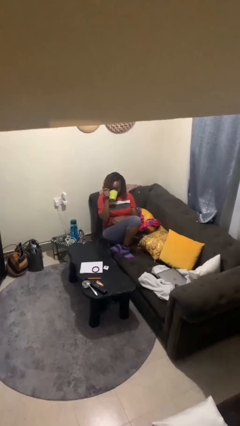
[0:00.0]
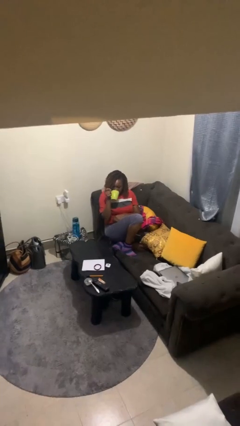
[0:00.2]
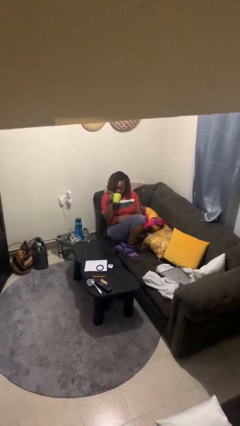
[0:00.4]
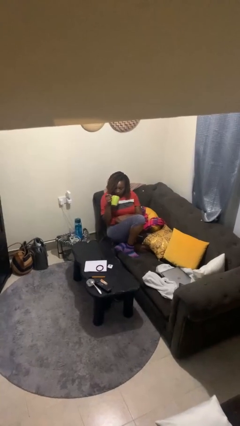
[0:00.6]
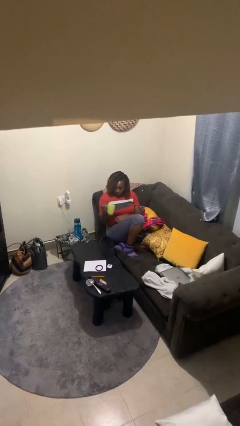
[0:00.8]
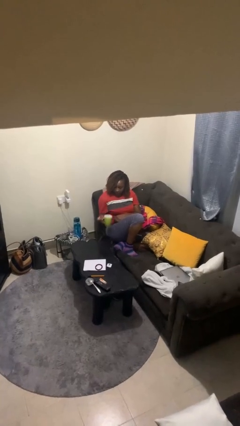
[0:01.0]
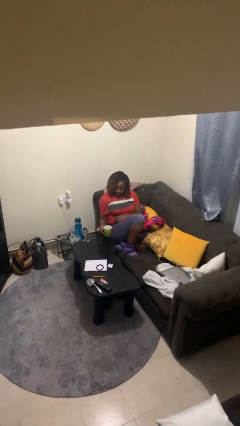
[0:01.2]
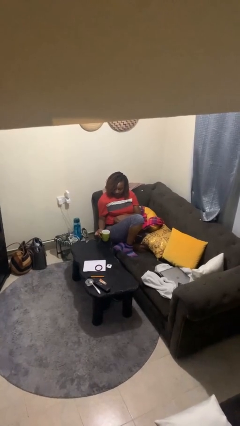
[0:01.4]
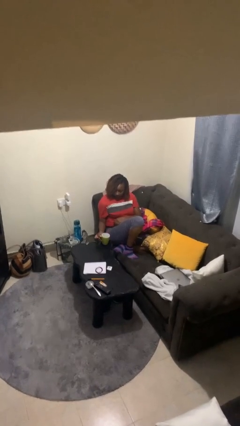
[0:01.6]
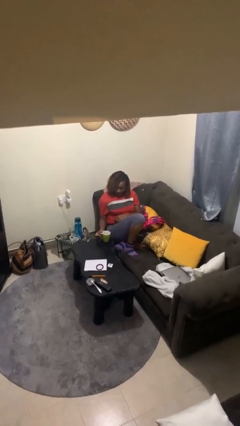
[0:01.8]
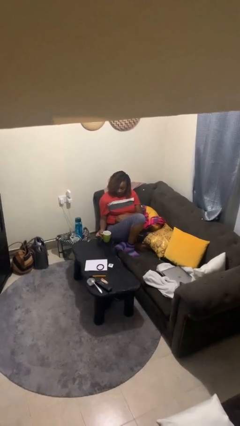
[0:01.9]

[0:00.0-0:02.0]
person puts down object on table

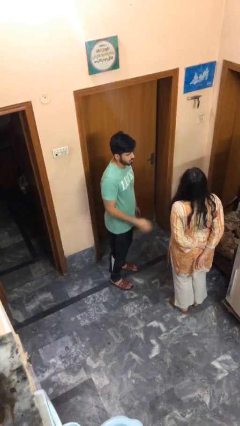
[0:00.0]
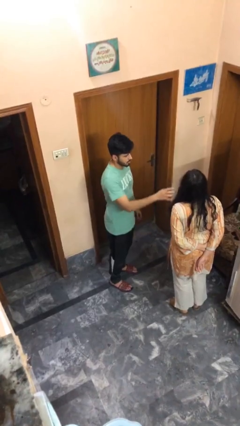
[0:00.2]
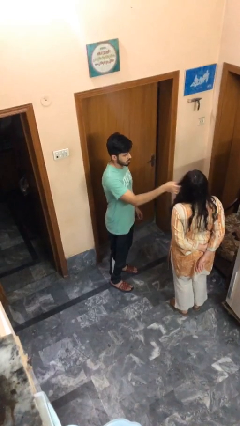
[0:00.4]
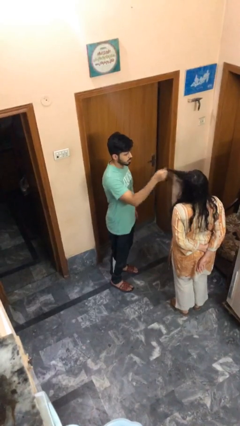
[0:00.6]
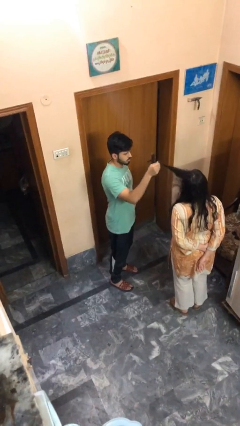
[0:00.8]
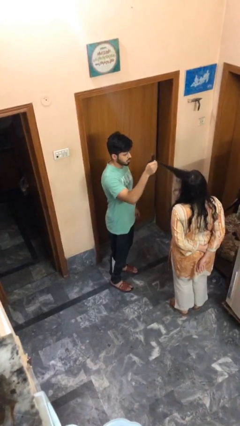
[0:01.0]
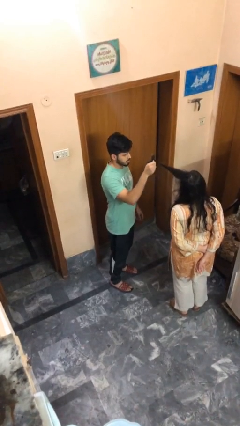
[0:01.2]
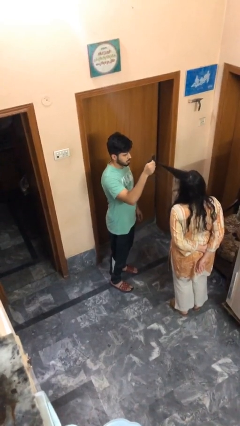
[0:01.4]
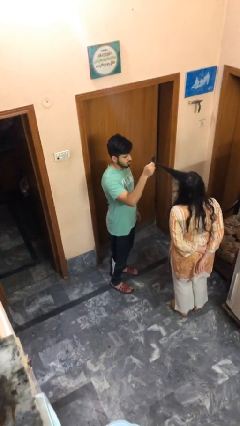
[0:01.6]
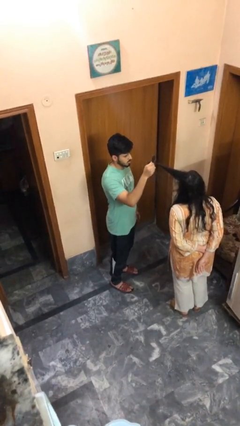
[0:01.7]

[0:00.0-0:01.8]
person grabs person by hair

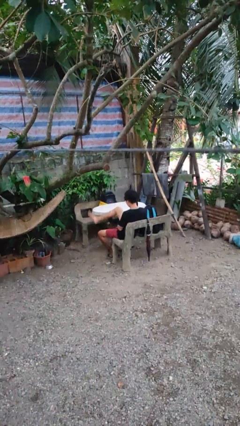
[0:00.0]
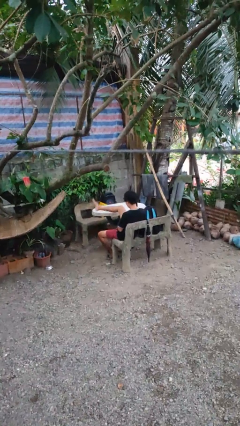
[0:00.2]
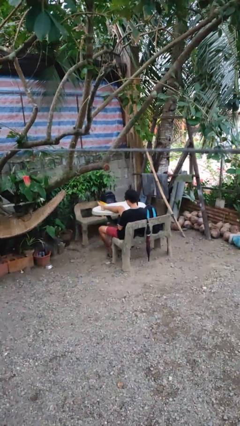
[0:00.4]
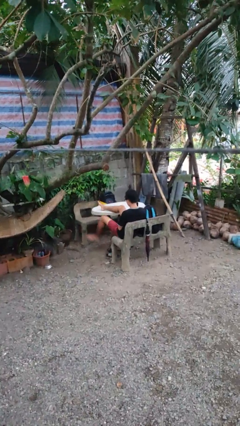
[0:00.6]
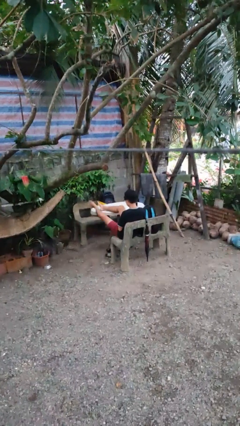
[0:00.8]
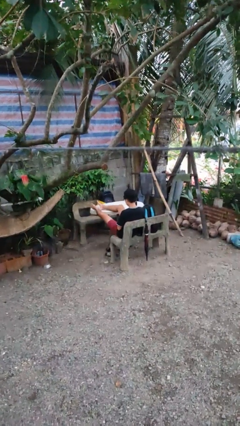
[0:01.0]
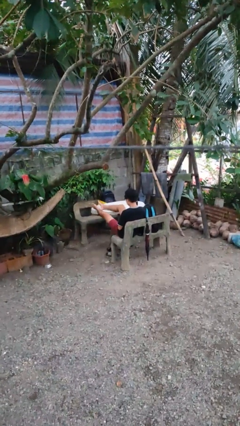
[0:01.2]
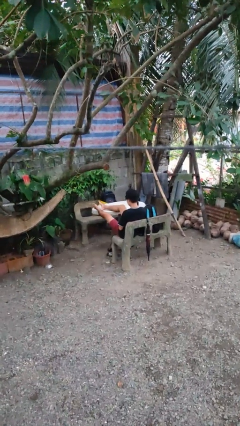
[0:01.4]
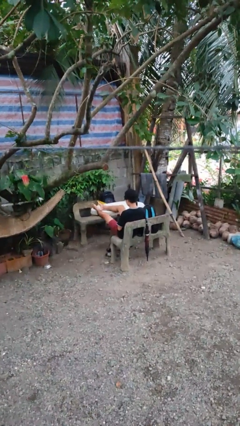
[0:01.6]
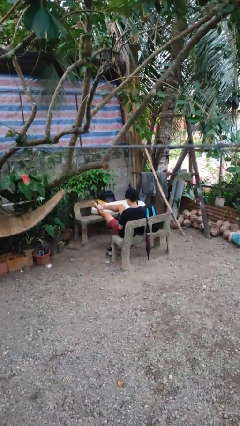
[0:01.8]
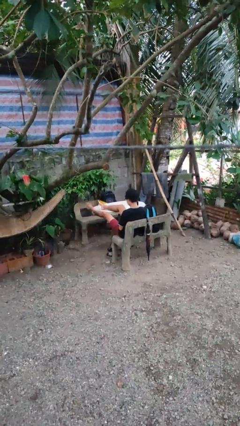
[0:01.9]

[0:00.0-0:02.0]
person puts feet up

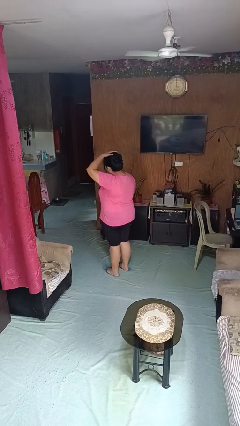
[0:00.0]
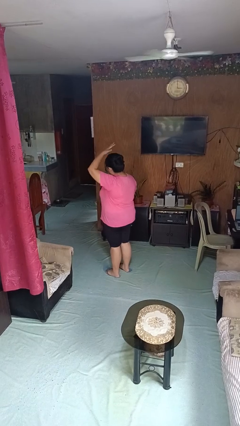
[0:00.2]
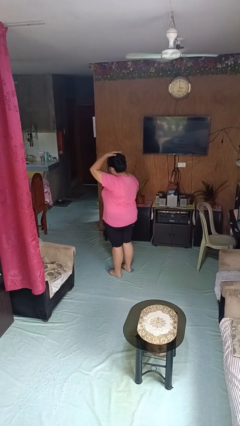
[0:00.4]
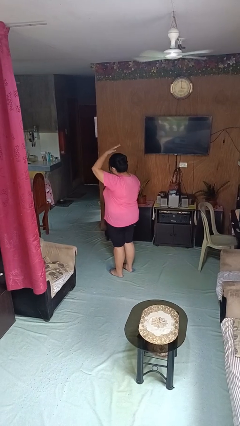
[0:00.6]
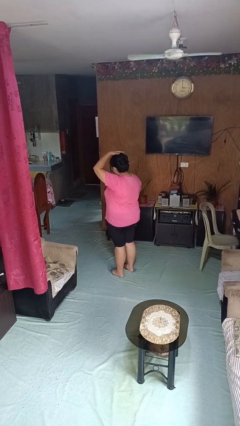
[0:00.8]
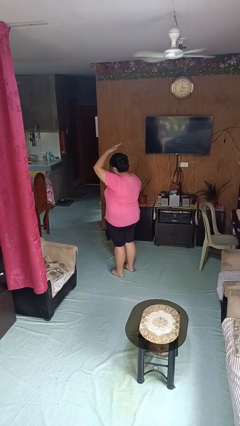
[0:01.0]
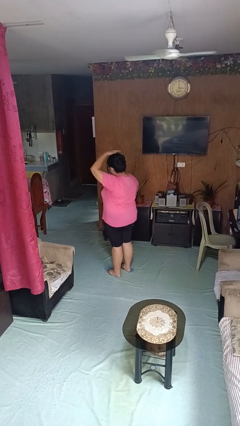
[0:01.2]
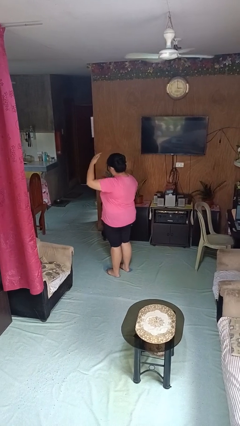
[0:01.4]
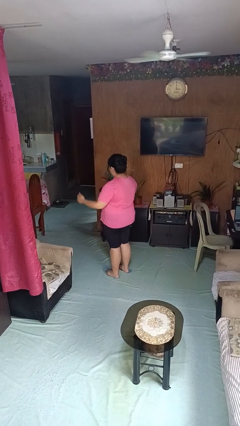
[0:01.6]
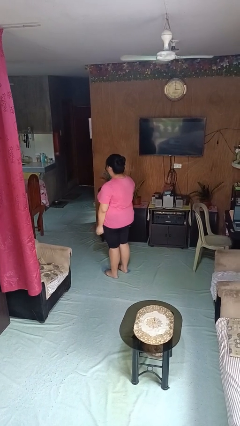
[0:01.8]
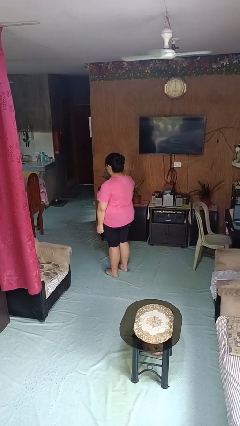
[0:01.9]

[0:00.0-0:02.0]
person pats head

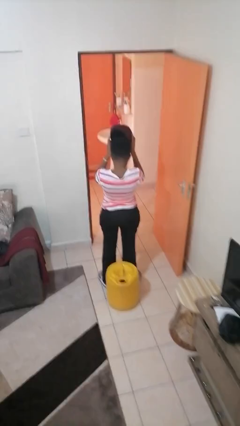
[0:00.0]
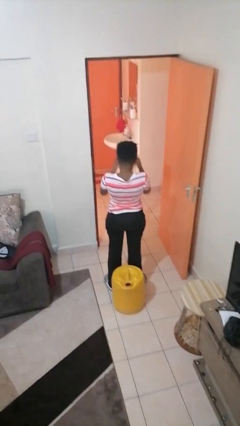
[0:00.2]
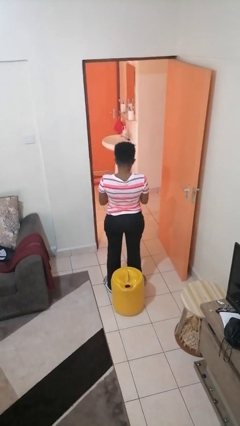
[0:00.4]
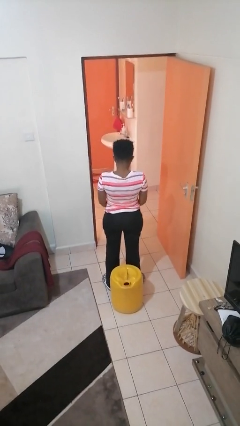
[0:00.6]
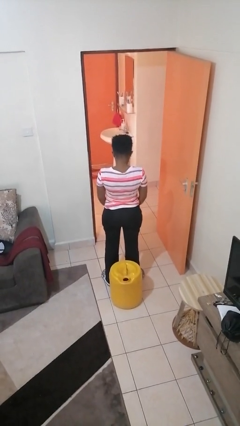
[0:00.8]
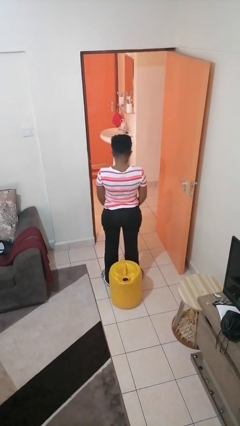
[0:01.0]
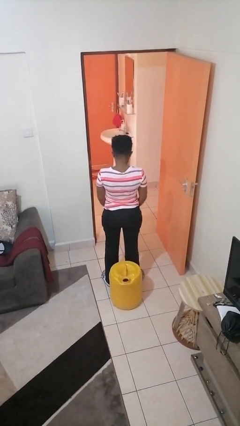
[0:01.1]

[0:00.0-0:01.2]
person takes off hat

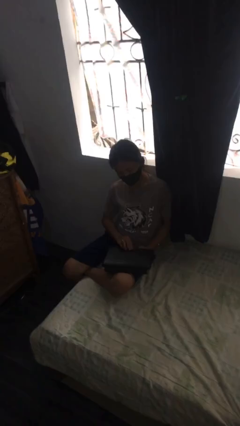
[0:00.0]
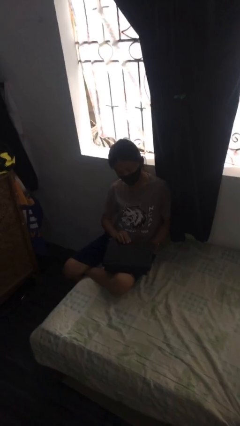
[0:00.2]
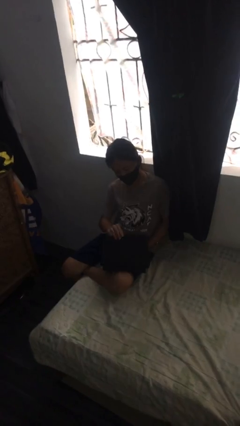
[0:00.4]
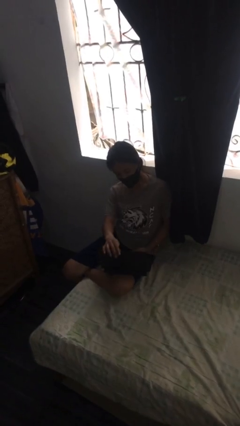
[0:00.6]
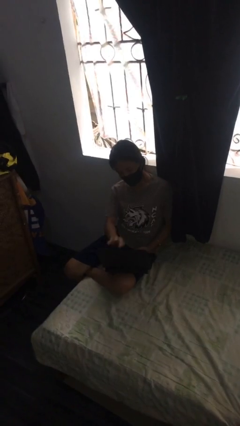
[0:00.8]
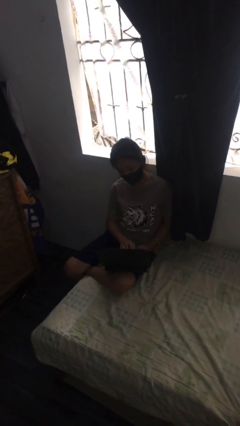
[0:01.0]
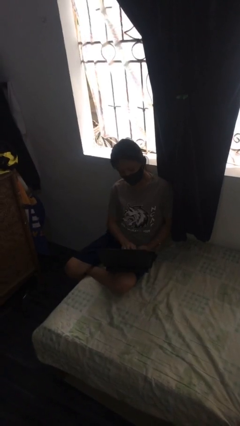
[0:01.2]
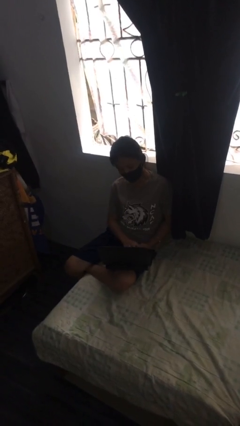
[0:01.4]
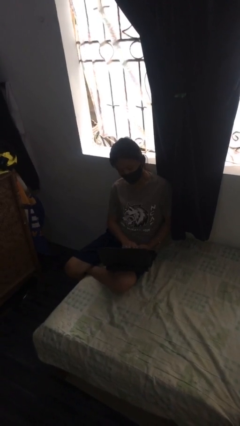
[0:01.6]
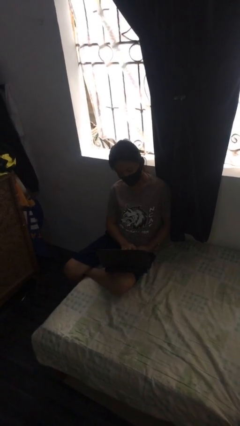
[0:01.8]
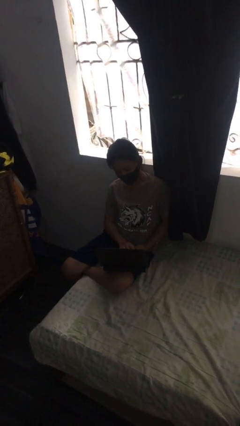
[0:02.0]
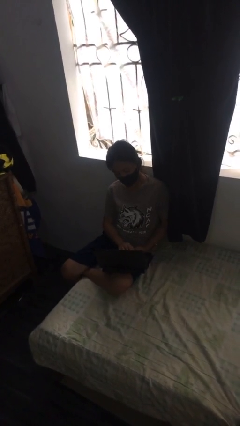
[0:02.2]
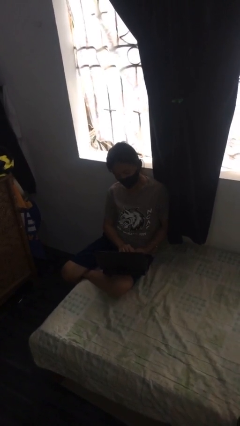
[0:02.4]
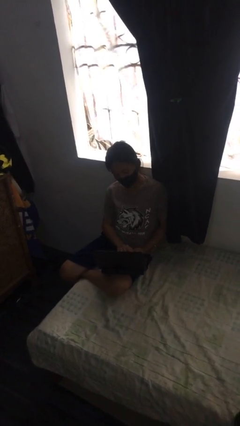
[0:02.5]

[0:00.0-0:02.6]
person interacts with laptop

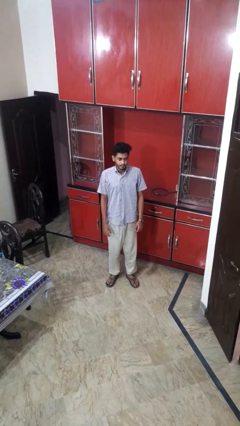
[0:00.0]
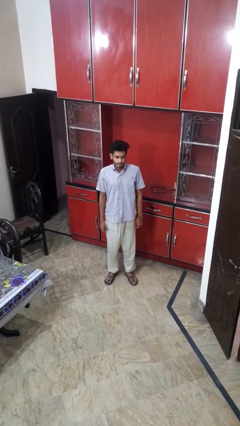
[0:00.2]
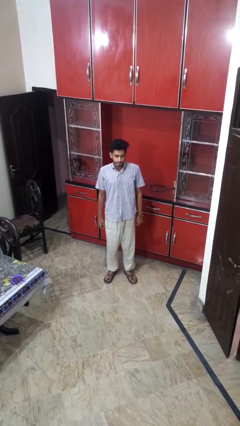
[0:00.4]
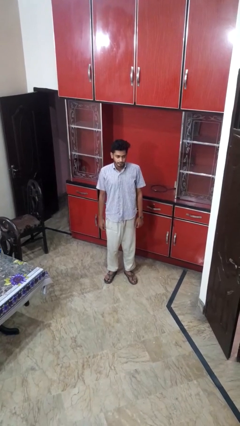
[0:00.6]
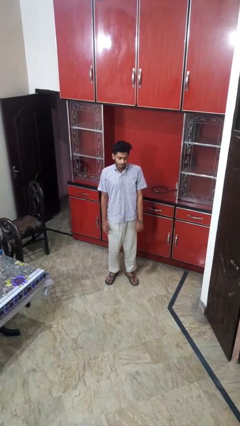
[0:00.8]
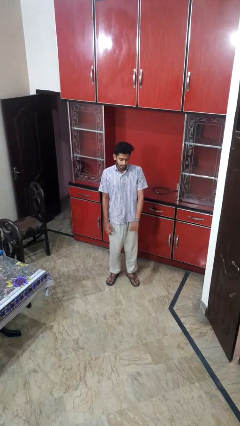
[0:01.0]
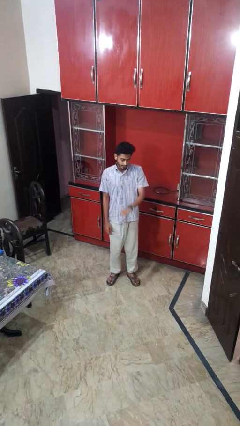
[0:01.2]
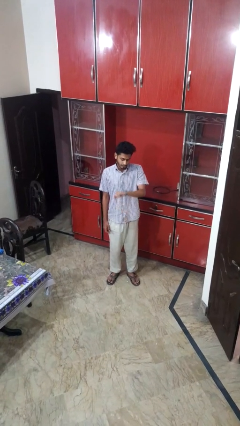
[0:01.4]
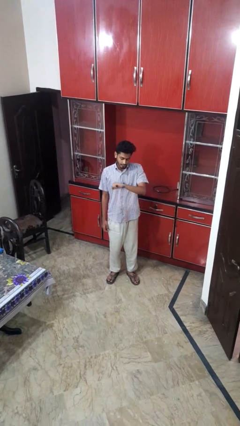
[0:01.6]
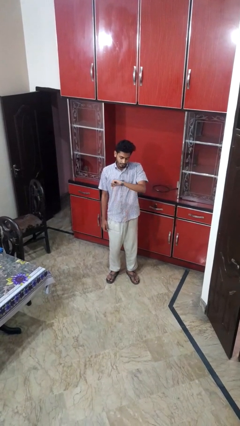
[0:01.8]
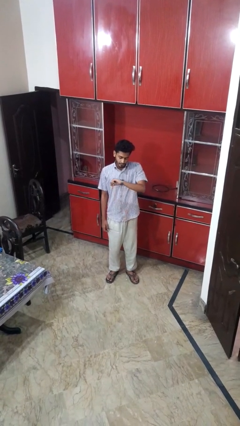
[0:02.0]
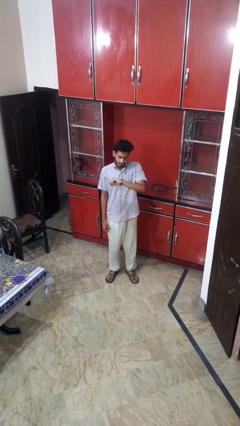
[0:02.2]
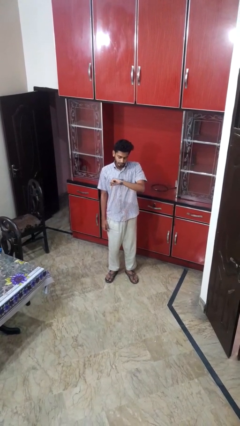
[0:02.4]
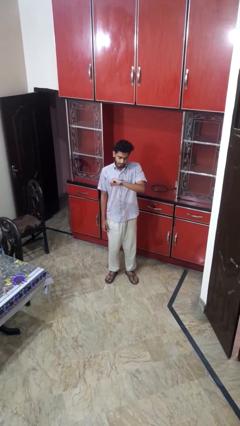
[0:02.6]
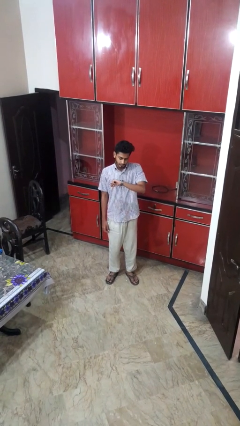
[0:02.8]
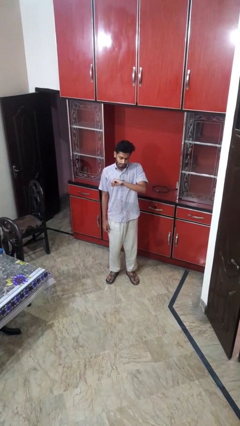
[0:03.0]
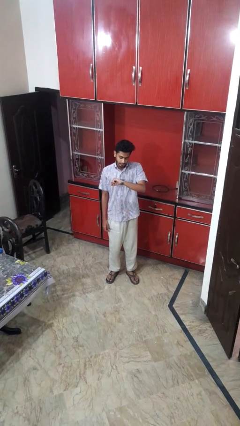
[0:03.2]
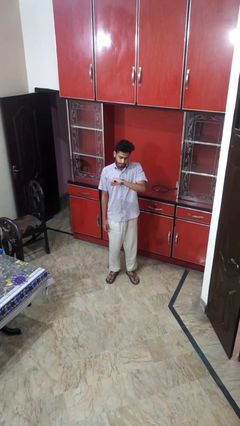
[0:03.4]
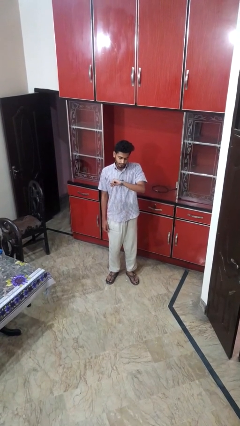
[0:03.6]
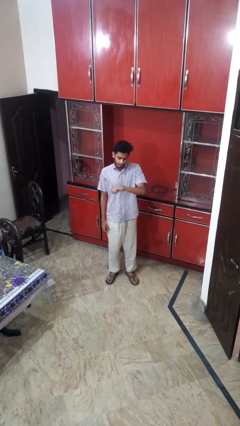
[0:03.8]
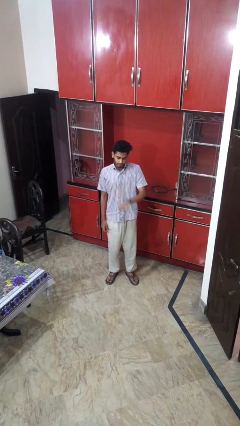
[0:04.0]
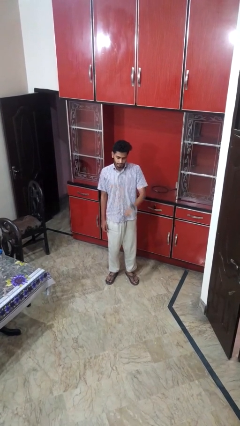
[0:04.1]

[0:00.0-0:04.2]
person sits crisscross

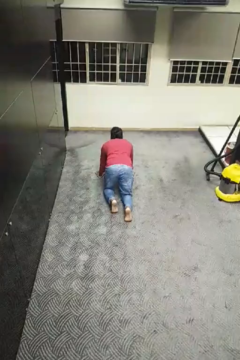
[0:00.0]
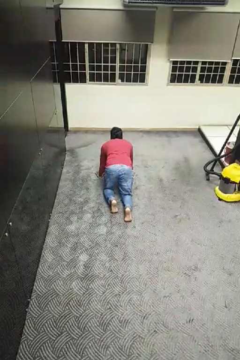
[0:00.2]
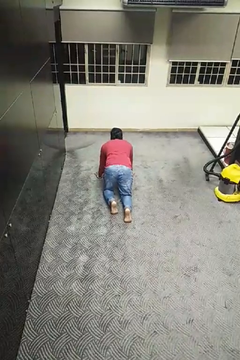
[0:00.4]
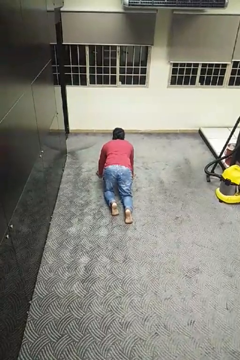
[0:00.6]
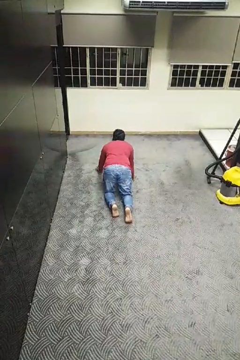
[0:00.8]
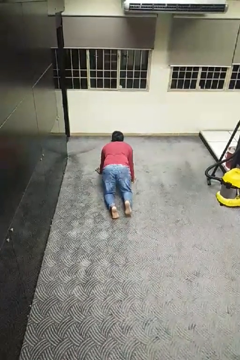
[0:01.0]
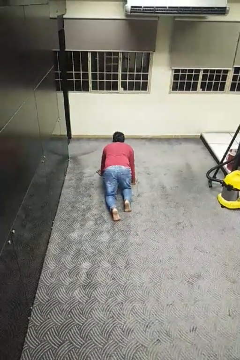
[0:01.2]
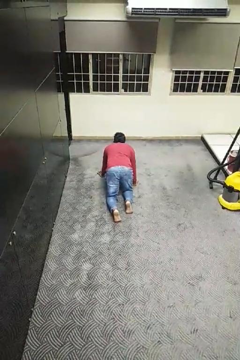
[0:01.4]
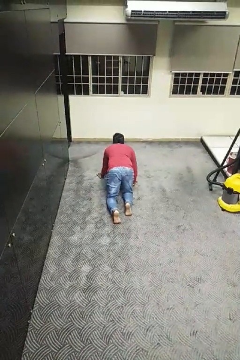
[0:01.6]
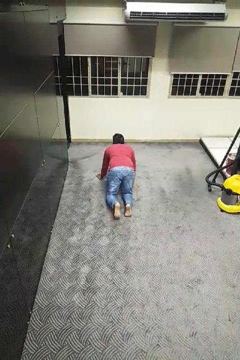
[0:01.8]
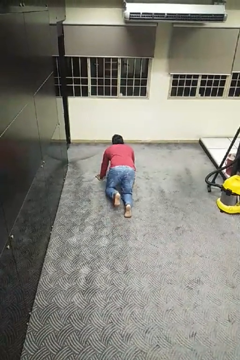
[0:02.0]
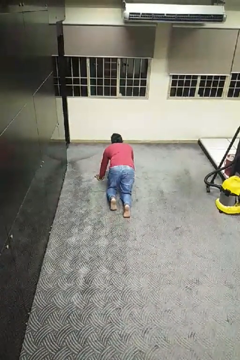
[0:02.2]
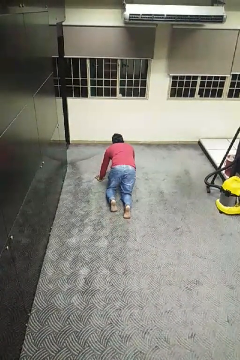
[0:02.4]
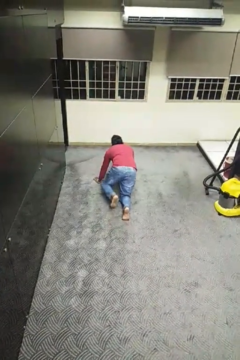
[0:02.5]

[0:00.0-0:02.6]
person crawls
